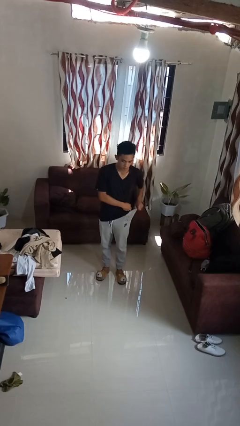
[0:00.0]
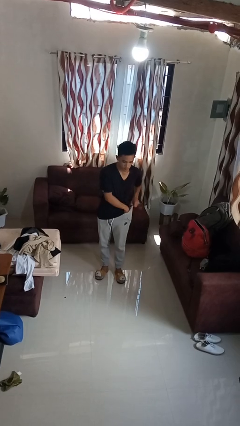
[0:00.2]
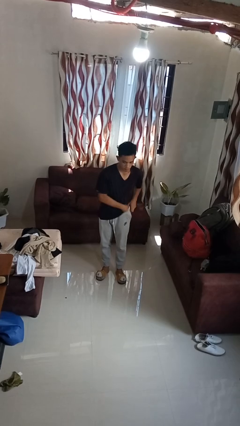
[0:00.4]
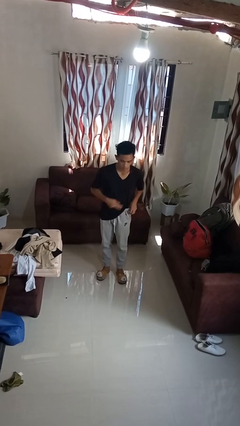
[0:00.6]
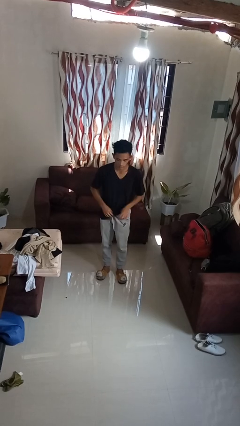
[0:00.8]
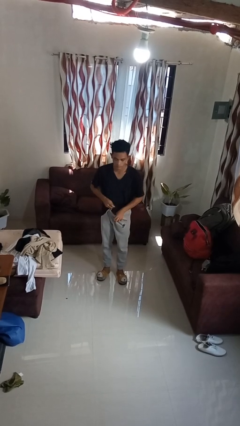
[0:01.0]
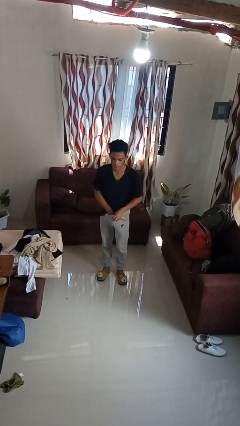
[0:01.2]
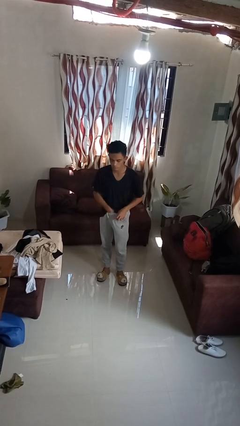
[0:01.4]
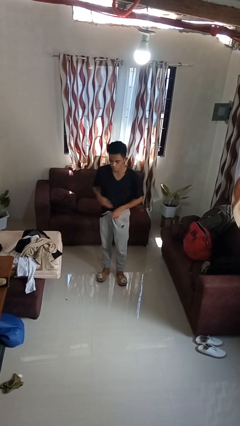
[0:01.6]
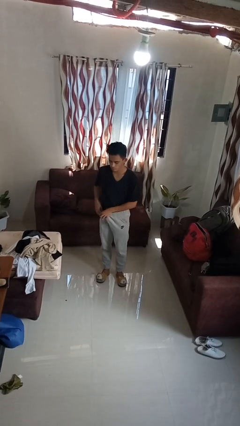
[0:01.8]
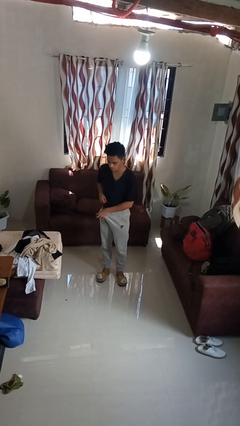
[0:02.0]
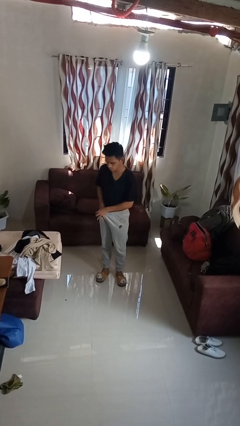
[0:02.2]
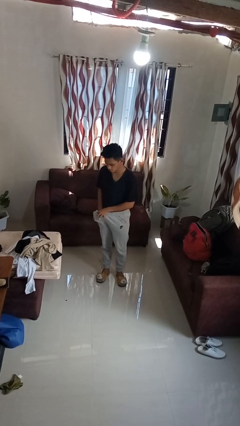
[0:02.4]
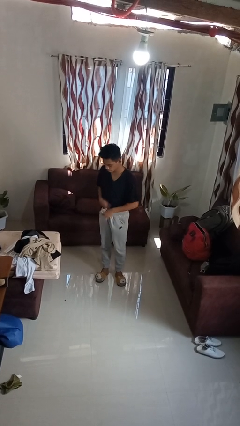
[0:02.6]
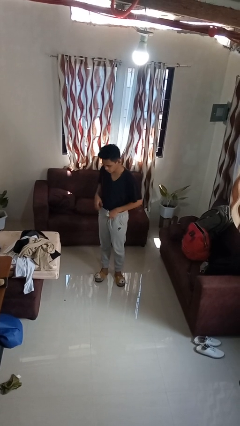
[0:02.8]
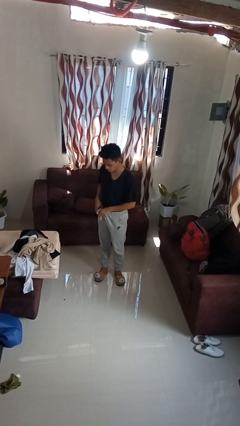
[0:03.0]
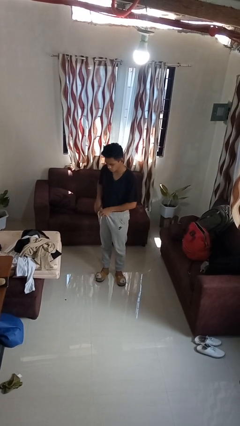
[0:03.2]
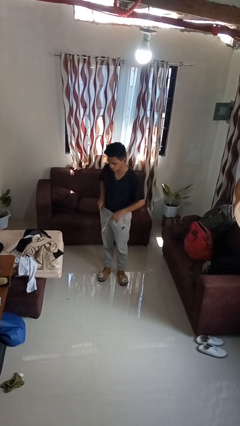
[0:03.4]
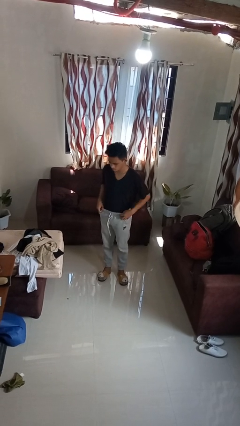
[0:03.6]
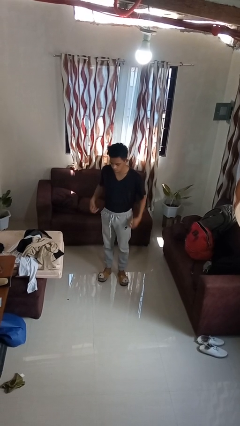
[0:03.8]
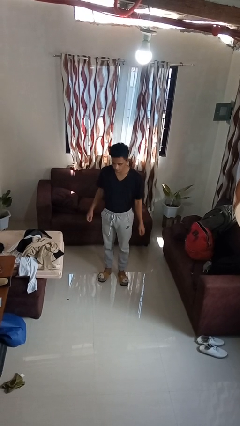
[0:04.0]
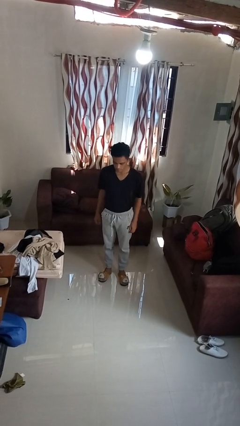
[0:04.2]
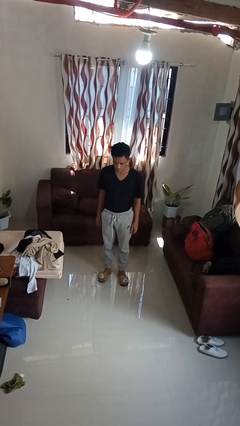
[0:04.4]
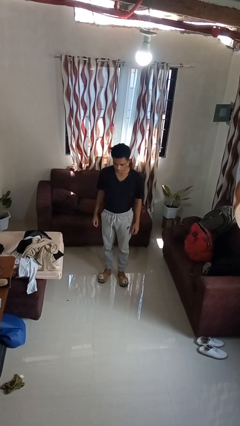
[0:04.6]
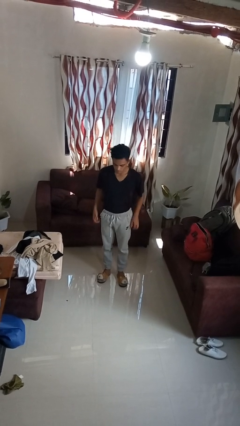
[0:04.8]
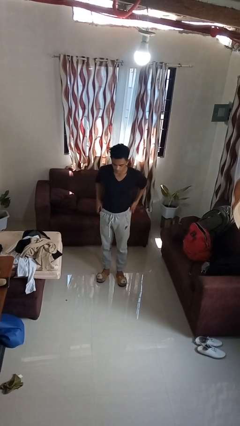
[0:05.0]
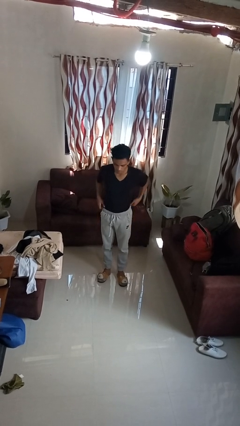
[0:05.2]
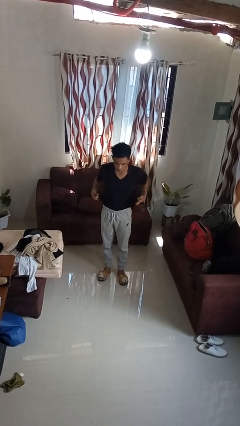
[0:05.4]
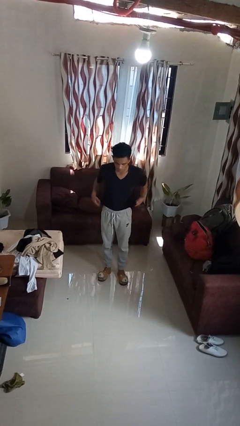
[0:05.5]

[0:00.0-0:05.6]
person tucks in shirt

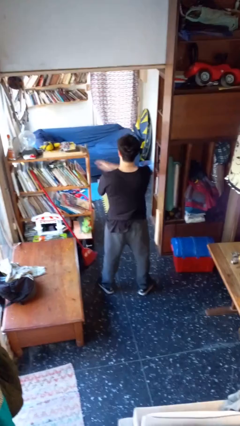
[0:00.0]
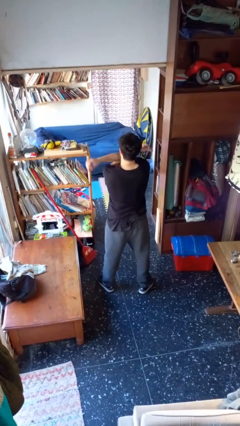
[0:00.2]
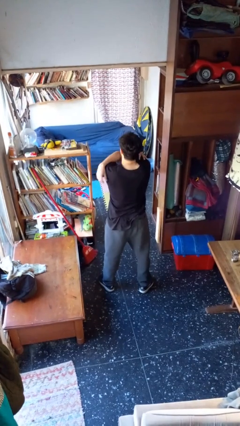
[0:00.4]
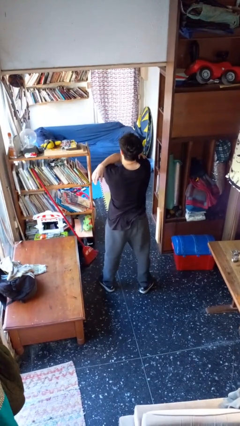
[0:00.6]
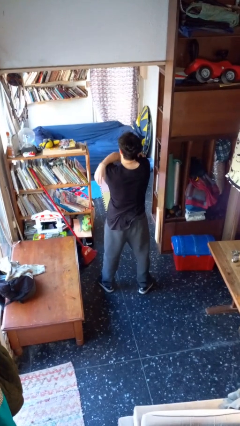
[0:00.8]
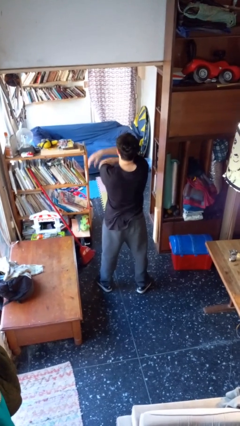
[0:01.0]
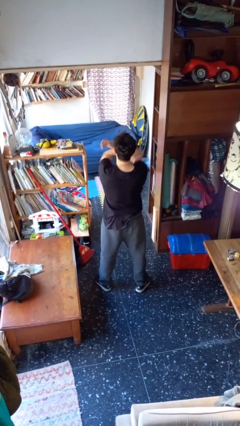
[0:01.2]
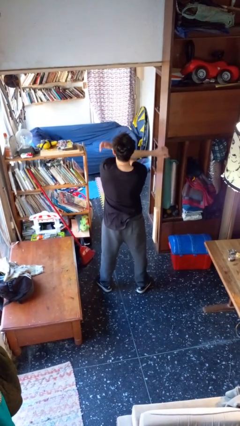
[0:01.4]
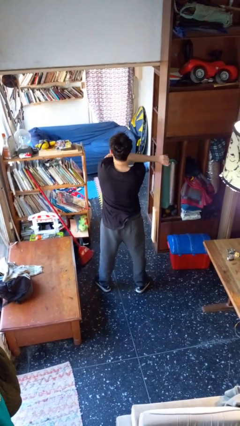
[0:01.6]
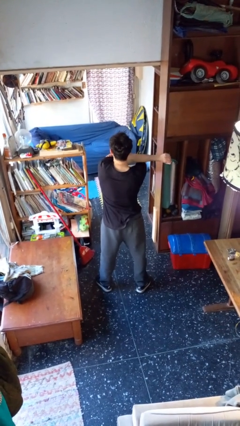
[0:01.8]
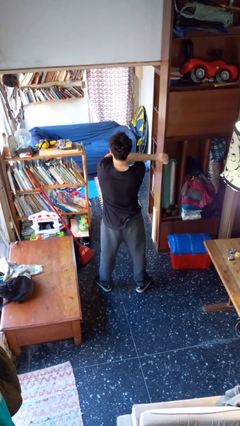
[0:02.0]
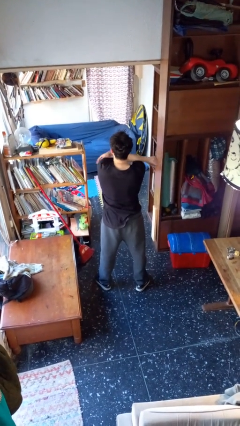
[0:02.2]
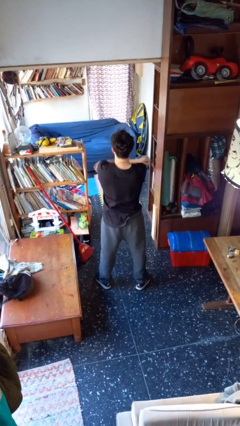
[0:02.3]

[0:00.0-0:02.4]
person stretches arms to side

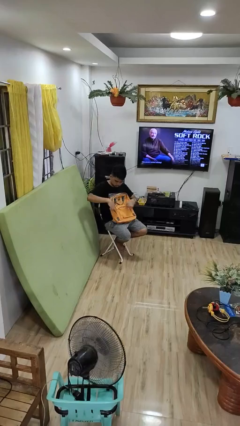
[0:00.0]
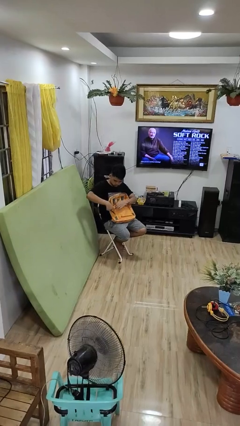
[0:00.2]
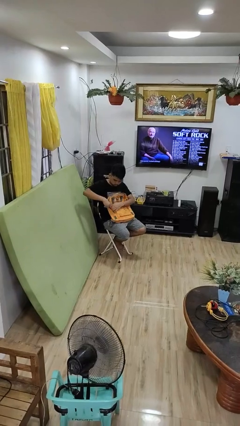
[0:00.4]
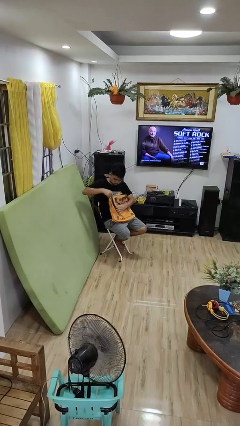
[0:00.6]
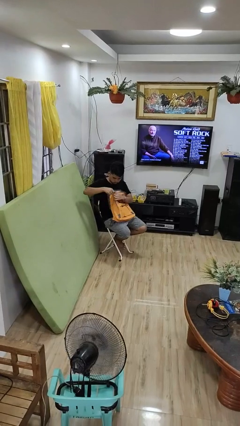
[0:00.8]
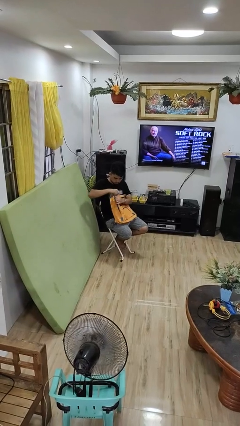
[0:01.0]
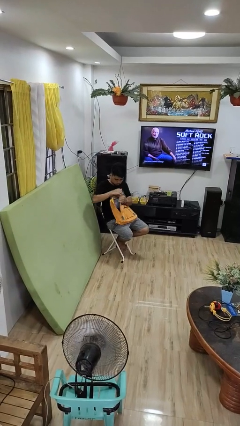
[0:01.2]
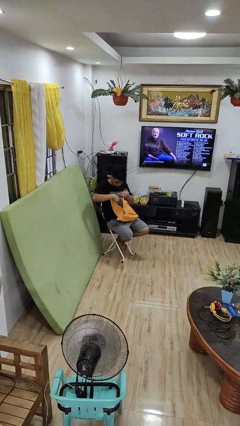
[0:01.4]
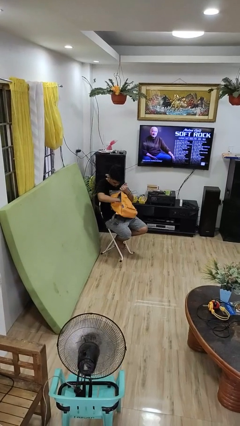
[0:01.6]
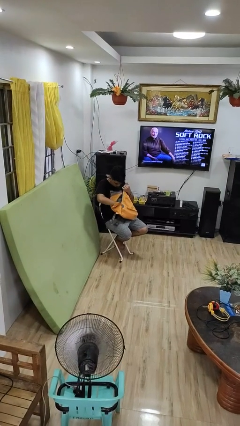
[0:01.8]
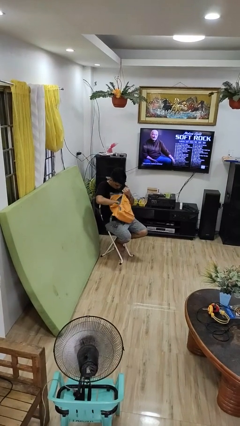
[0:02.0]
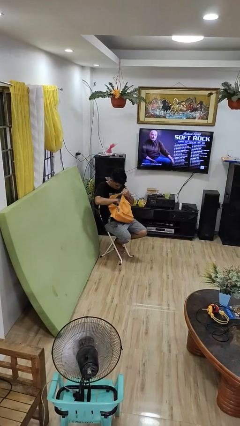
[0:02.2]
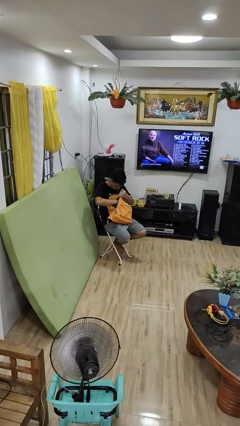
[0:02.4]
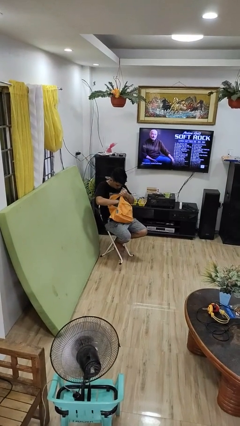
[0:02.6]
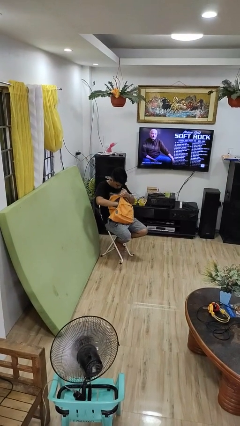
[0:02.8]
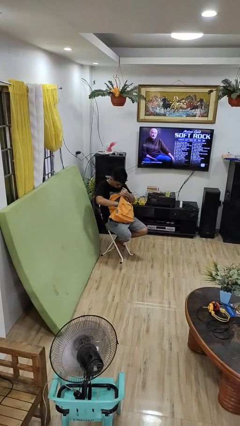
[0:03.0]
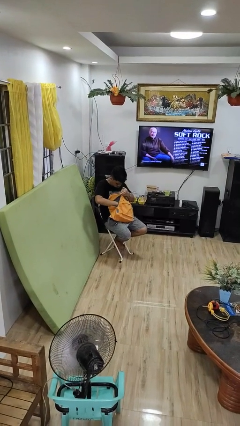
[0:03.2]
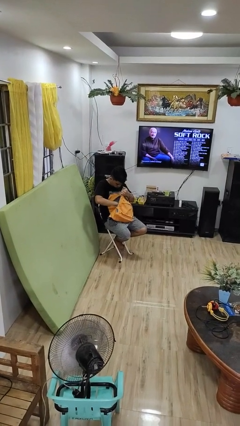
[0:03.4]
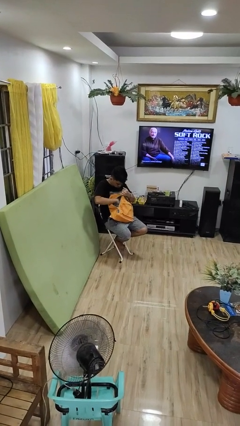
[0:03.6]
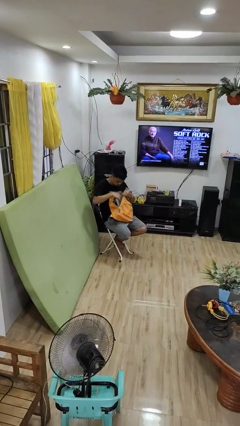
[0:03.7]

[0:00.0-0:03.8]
person searches in backpack

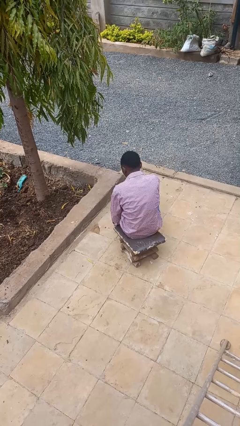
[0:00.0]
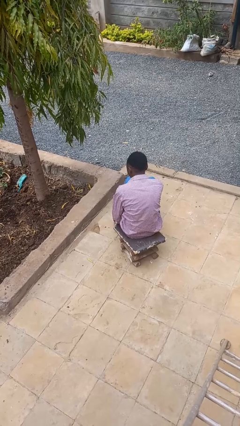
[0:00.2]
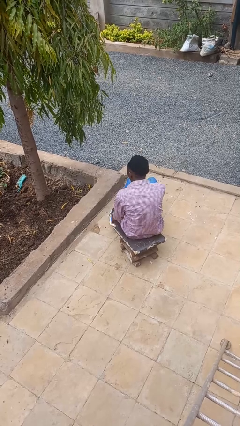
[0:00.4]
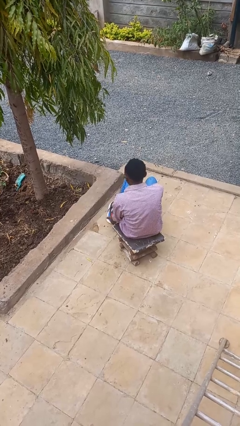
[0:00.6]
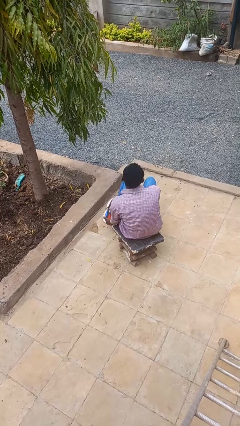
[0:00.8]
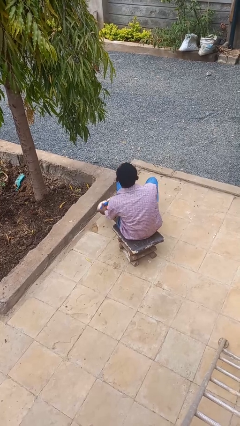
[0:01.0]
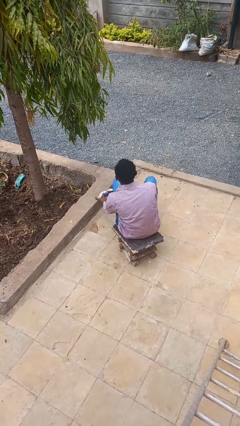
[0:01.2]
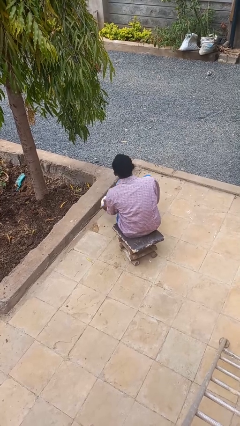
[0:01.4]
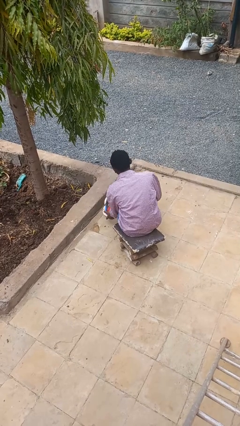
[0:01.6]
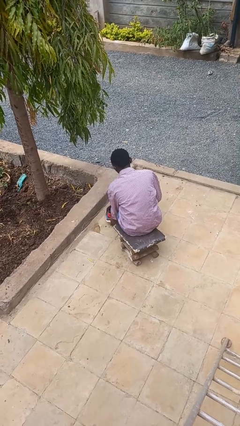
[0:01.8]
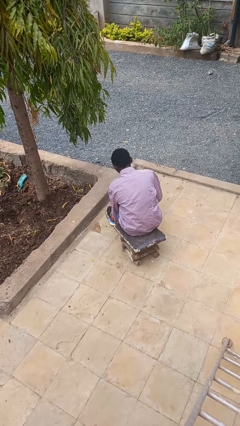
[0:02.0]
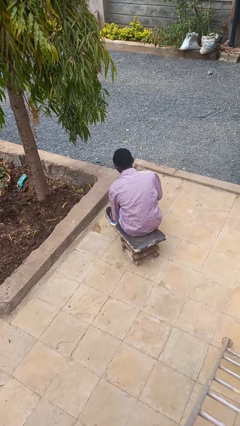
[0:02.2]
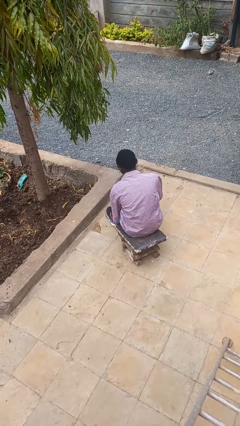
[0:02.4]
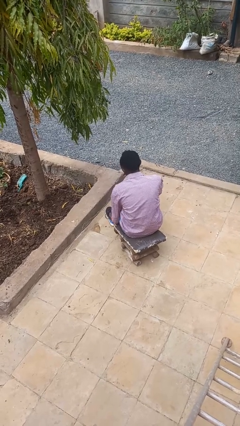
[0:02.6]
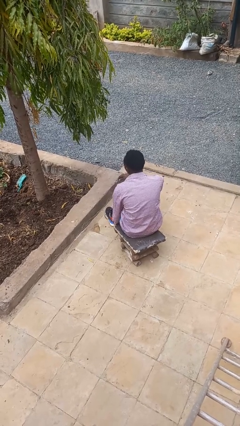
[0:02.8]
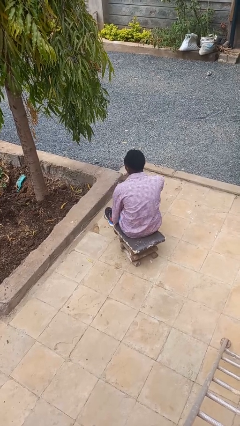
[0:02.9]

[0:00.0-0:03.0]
person takes off shoes

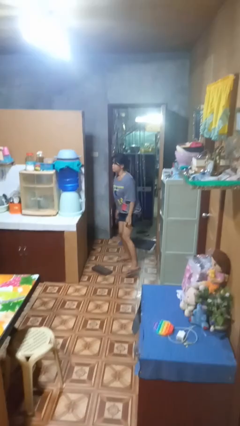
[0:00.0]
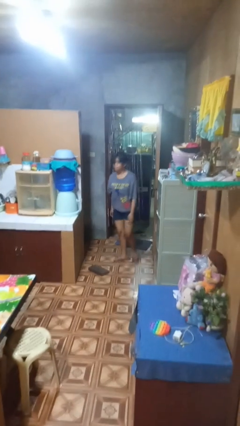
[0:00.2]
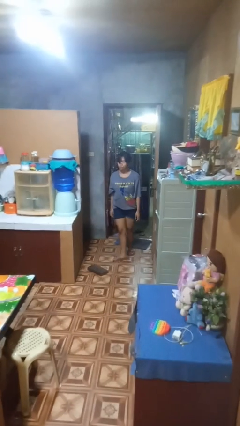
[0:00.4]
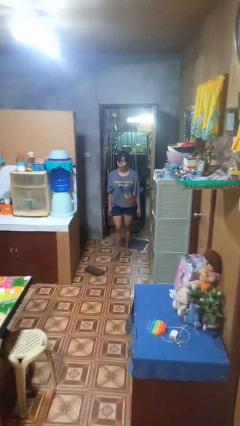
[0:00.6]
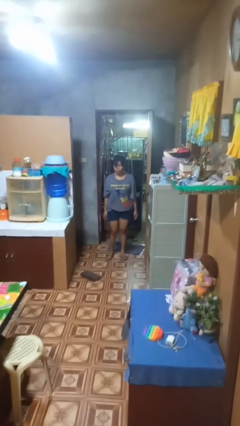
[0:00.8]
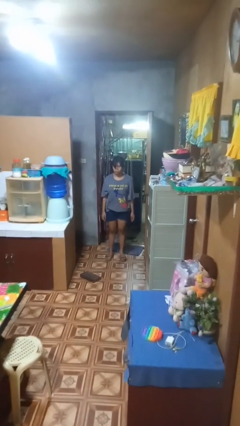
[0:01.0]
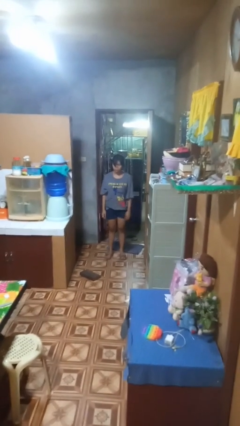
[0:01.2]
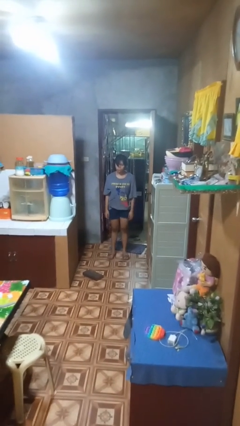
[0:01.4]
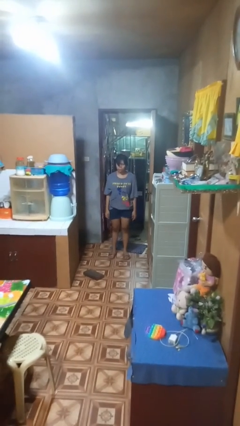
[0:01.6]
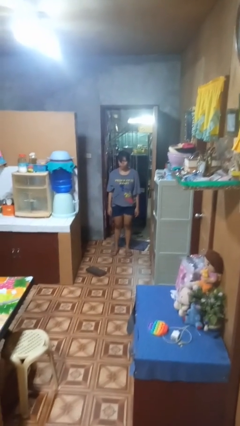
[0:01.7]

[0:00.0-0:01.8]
person stands up from floor

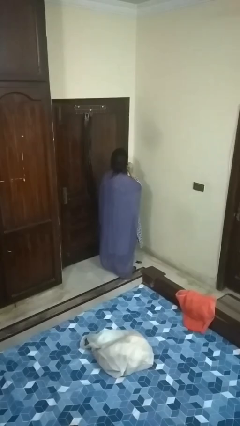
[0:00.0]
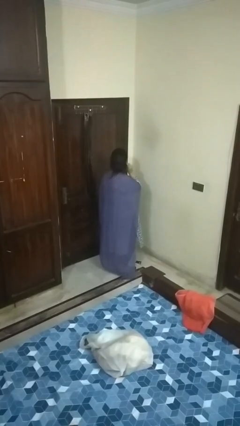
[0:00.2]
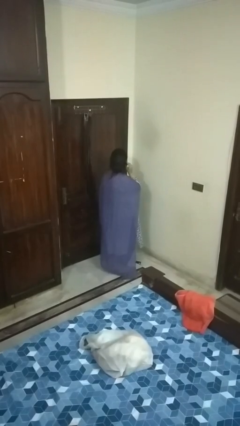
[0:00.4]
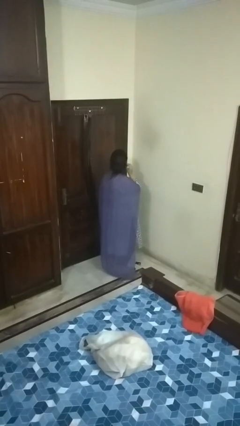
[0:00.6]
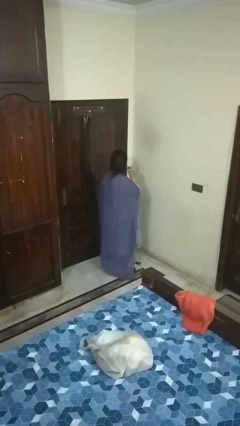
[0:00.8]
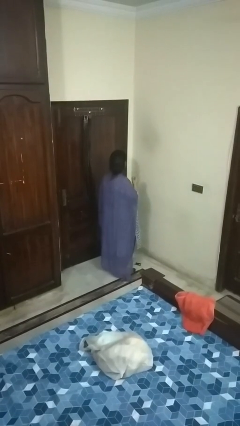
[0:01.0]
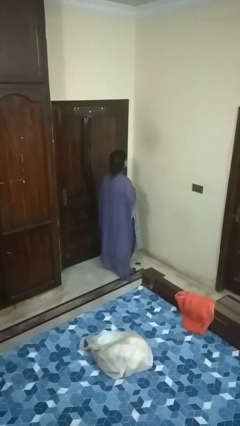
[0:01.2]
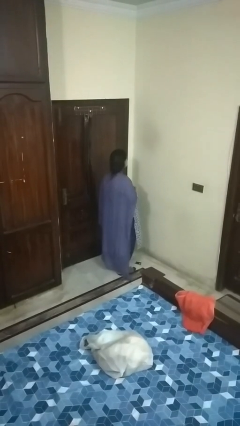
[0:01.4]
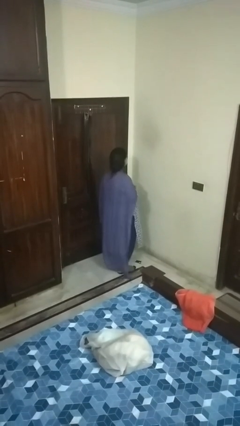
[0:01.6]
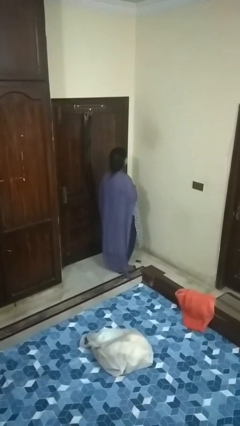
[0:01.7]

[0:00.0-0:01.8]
person takes off earrings
